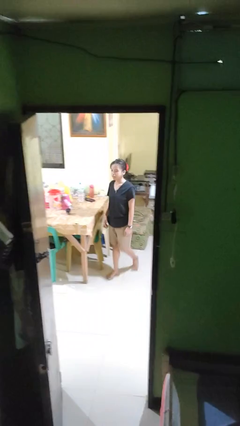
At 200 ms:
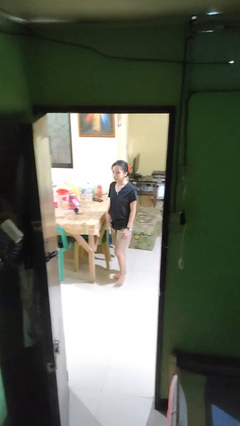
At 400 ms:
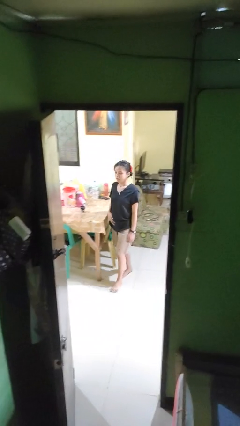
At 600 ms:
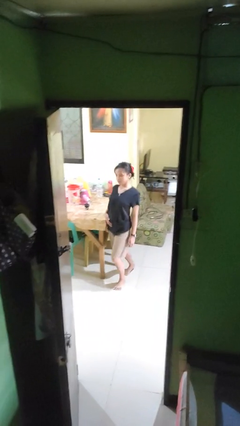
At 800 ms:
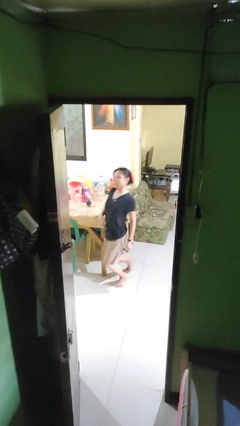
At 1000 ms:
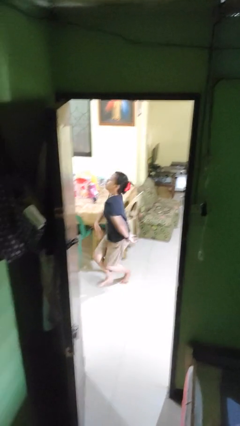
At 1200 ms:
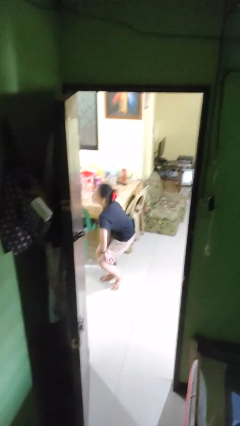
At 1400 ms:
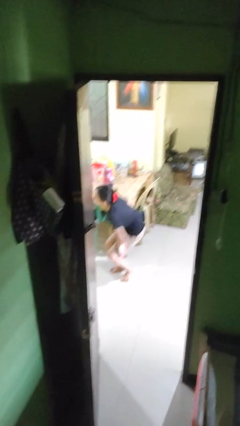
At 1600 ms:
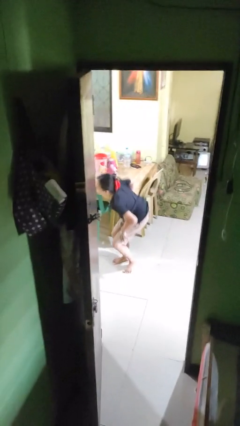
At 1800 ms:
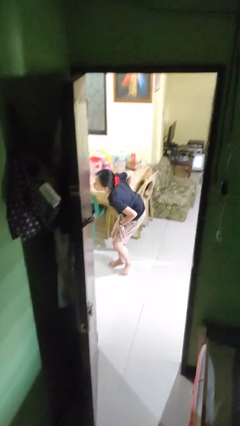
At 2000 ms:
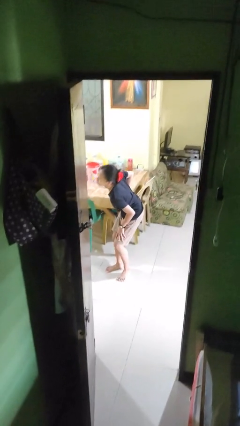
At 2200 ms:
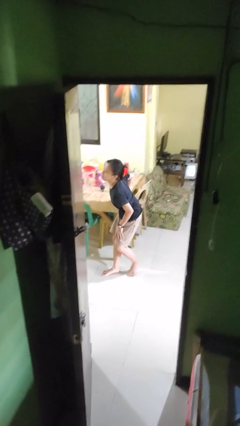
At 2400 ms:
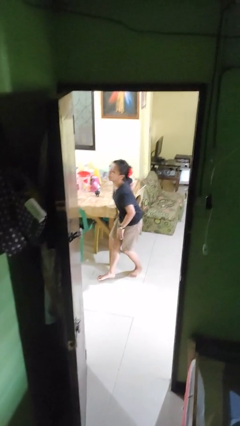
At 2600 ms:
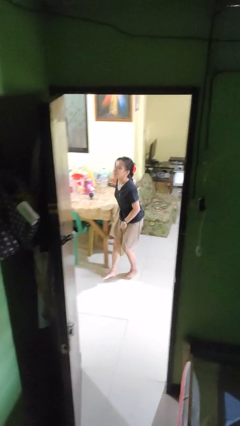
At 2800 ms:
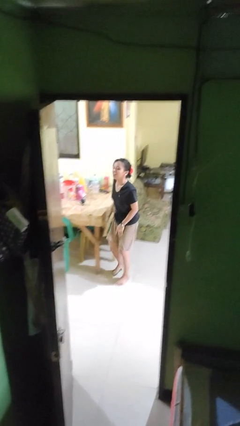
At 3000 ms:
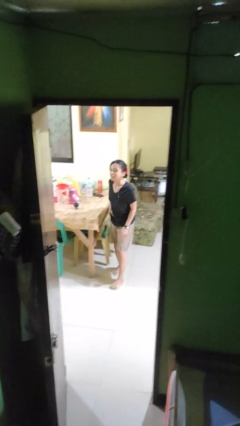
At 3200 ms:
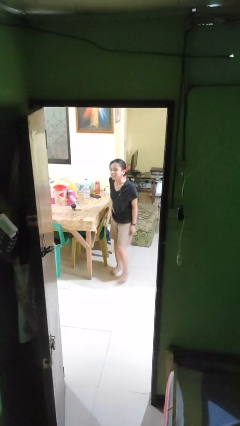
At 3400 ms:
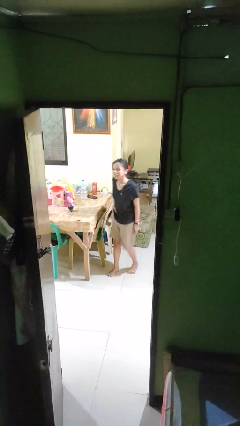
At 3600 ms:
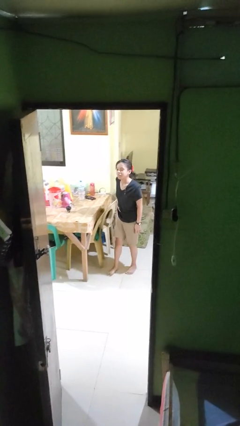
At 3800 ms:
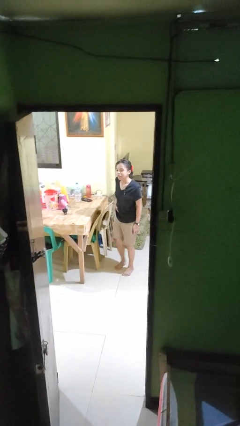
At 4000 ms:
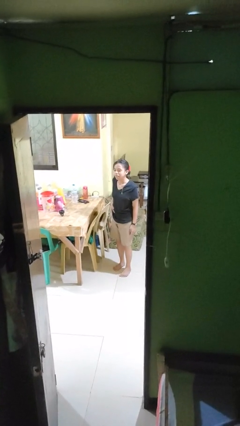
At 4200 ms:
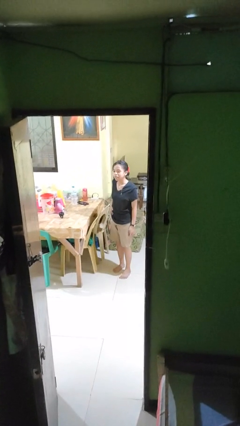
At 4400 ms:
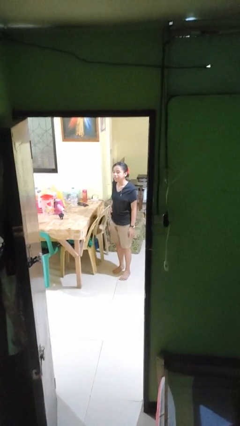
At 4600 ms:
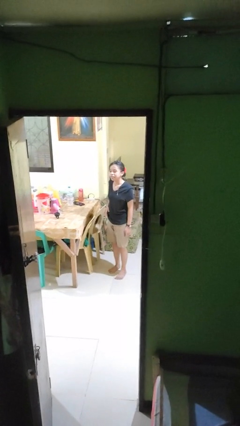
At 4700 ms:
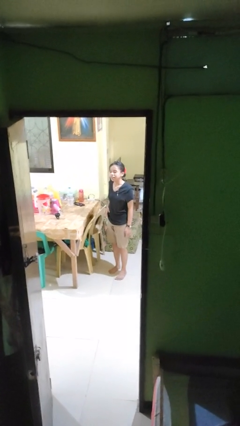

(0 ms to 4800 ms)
person bumps into table

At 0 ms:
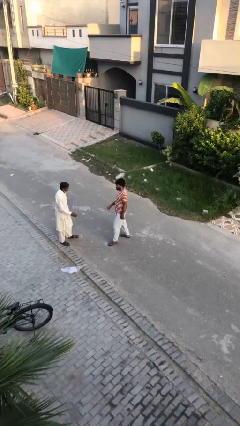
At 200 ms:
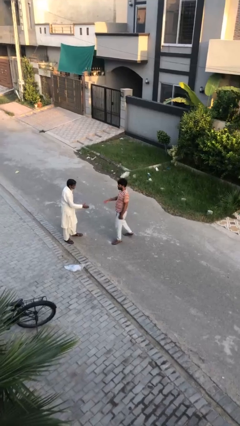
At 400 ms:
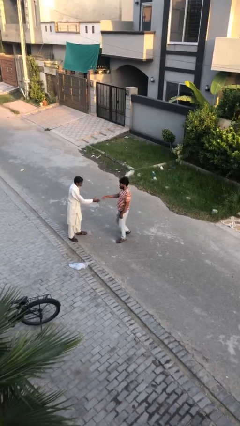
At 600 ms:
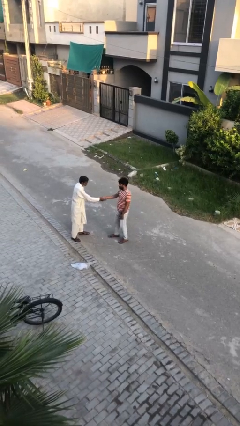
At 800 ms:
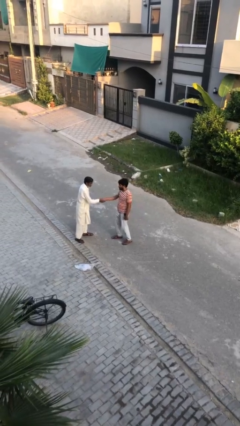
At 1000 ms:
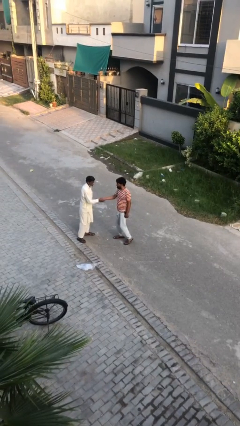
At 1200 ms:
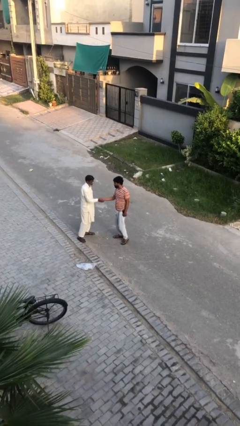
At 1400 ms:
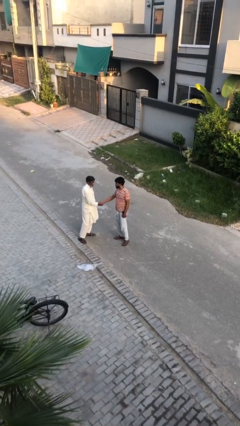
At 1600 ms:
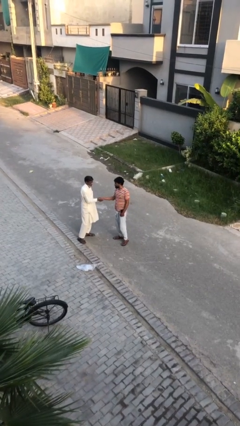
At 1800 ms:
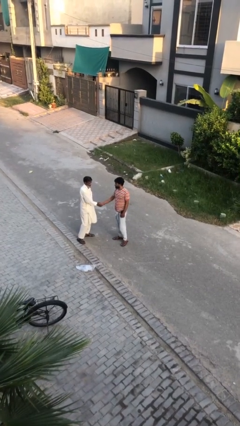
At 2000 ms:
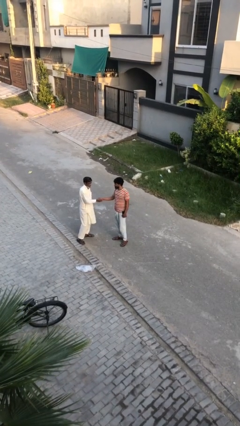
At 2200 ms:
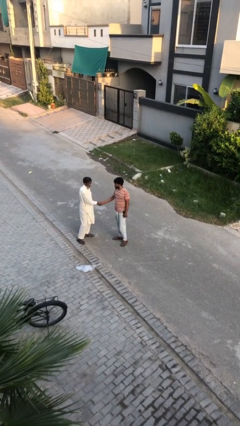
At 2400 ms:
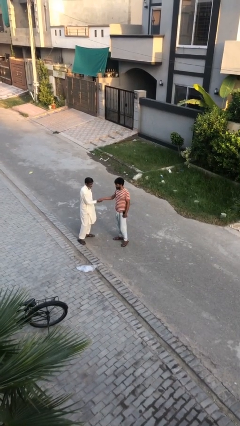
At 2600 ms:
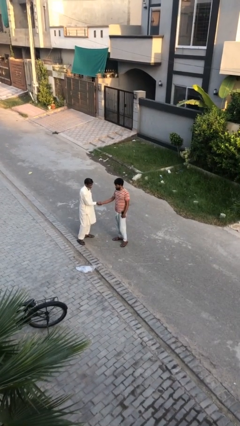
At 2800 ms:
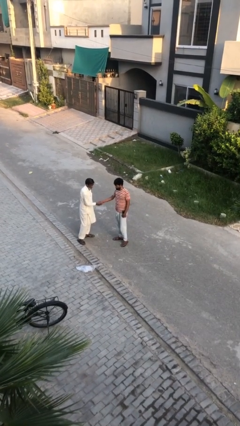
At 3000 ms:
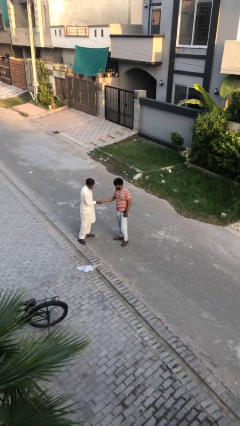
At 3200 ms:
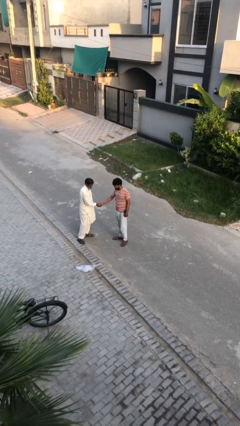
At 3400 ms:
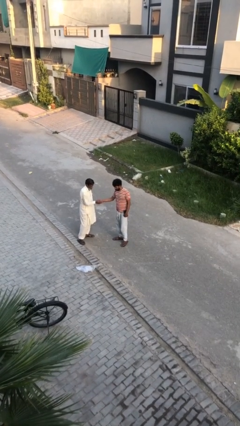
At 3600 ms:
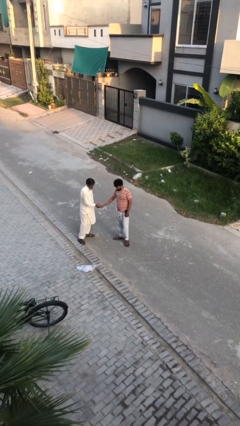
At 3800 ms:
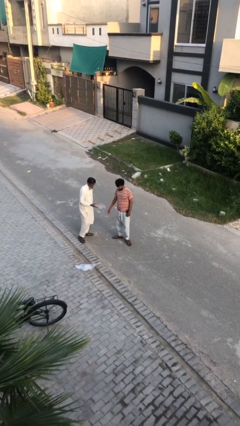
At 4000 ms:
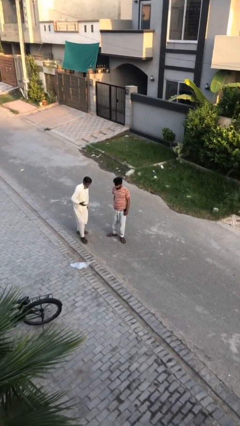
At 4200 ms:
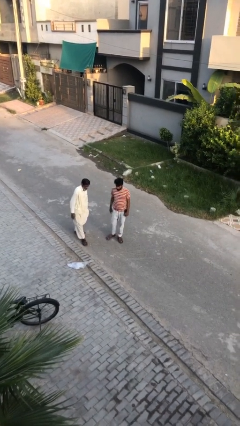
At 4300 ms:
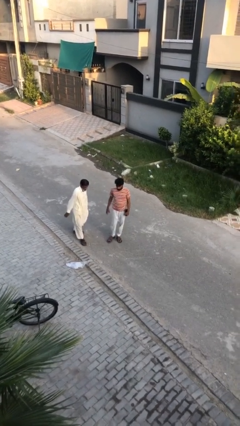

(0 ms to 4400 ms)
person shakes hand

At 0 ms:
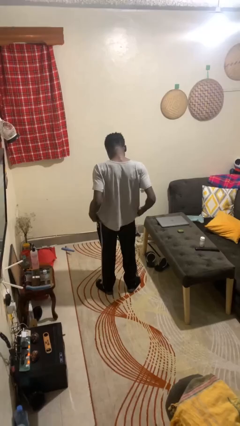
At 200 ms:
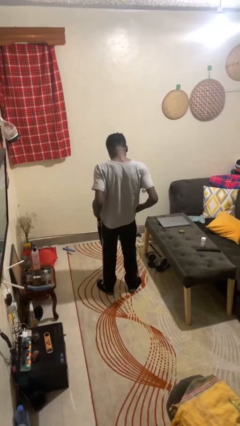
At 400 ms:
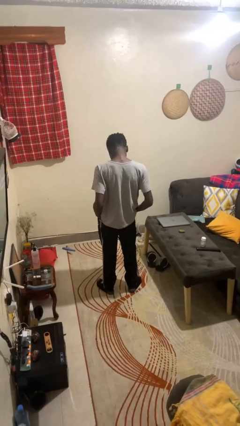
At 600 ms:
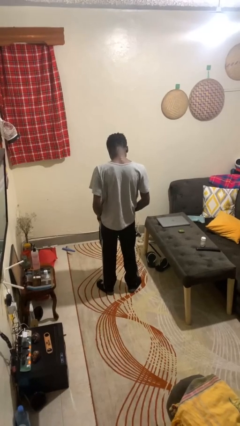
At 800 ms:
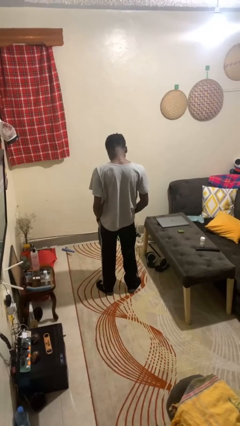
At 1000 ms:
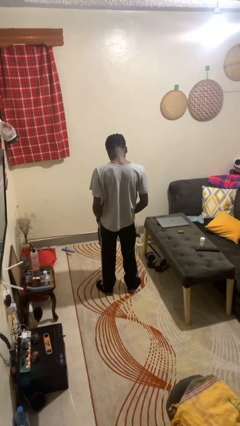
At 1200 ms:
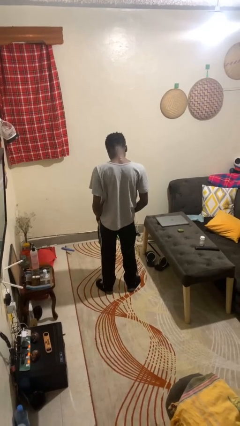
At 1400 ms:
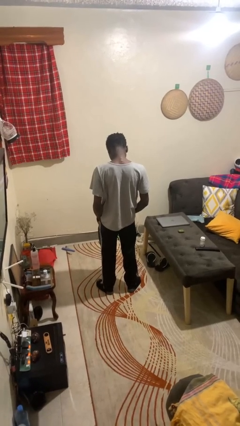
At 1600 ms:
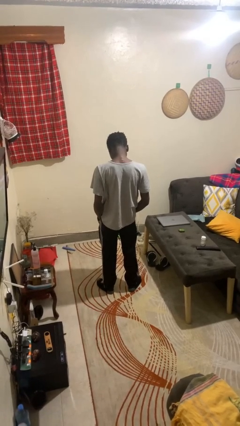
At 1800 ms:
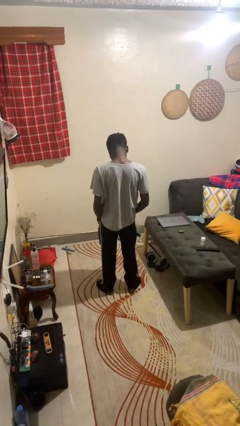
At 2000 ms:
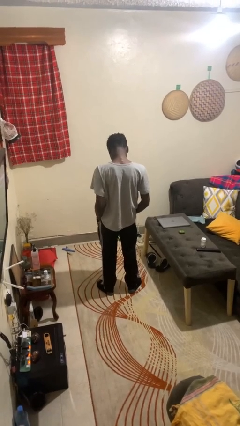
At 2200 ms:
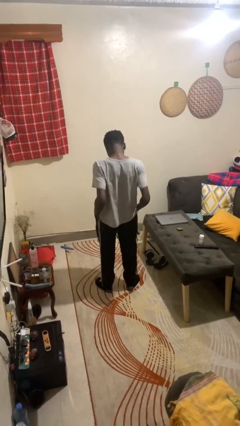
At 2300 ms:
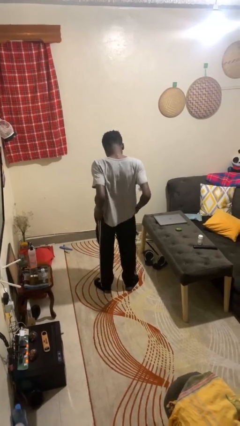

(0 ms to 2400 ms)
person puts hands in back pockets

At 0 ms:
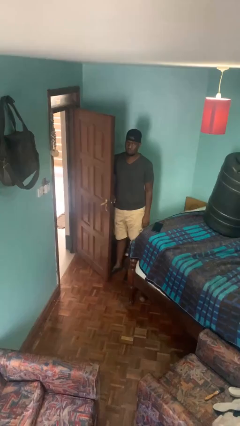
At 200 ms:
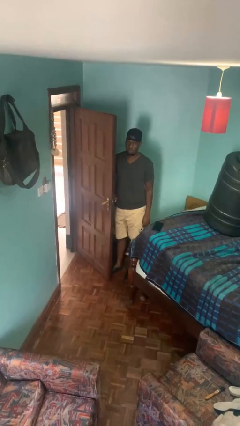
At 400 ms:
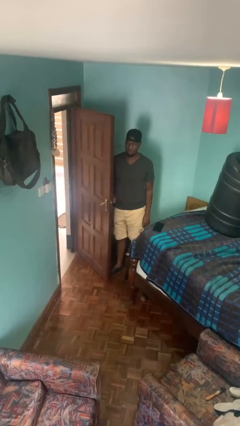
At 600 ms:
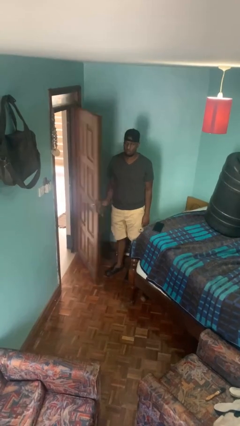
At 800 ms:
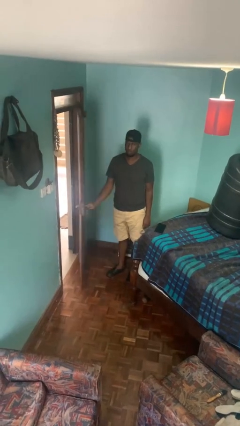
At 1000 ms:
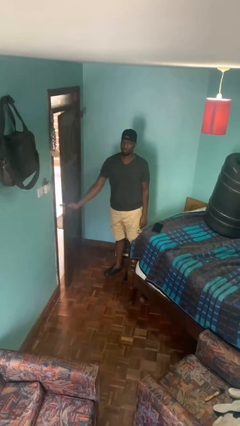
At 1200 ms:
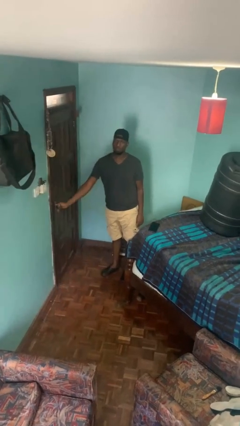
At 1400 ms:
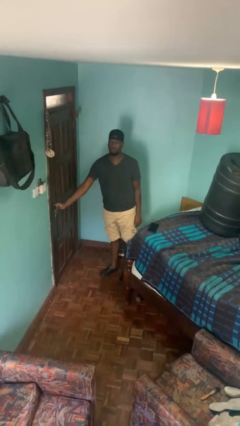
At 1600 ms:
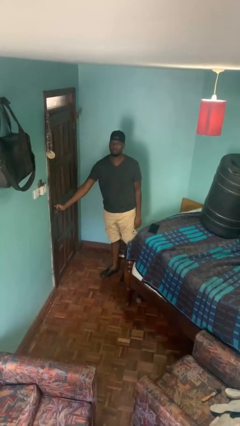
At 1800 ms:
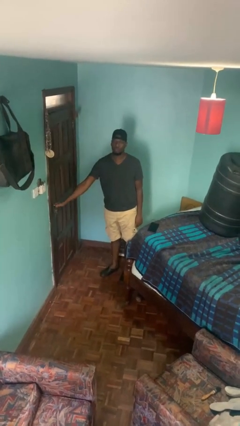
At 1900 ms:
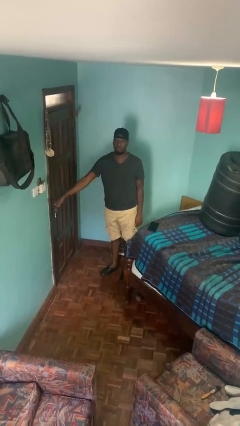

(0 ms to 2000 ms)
person closes facility door

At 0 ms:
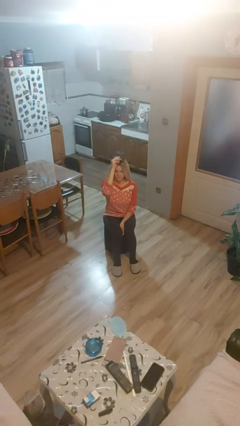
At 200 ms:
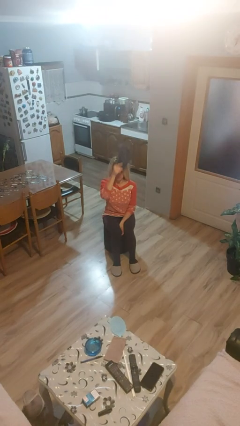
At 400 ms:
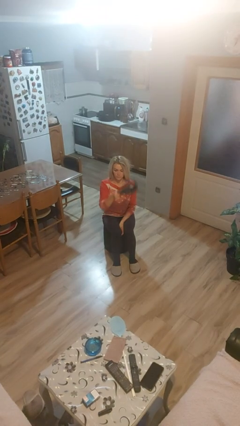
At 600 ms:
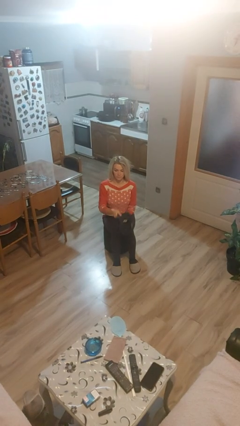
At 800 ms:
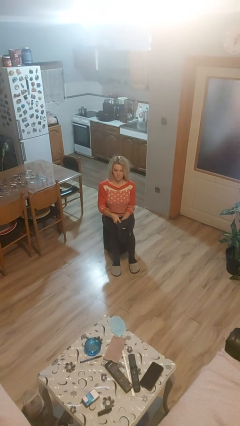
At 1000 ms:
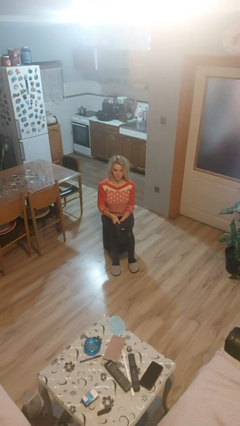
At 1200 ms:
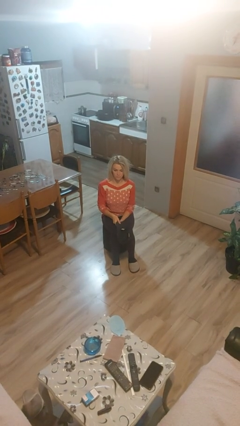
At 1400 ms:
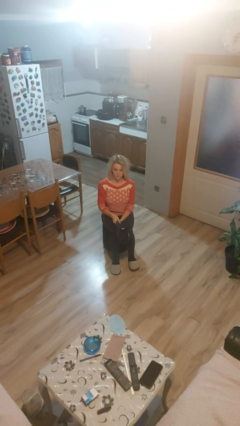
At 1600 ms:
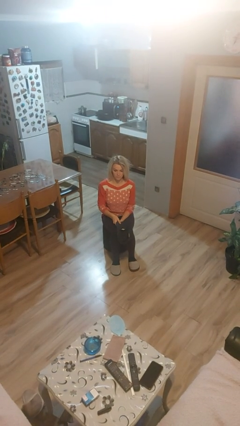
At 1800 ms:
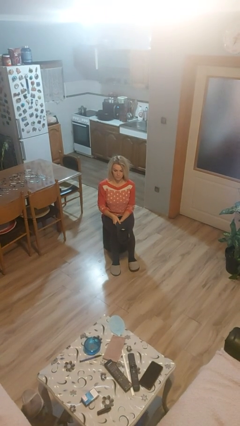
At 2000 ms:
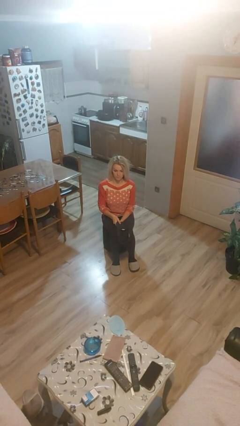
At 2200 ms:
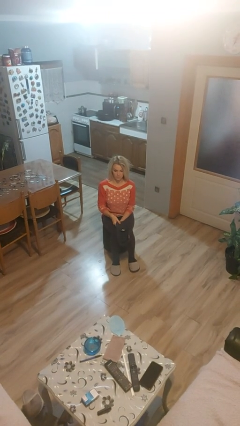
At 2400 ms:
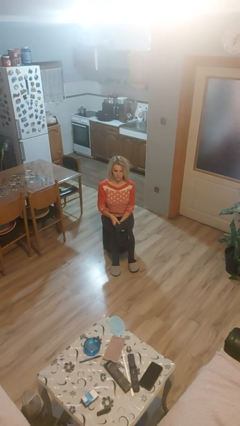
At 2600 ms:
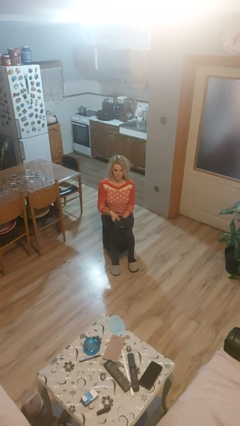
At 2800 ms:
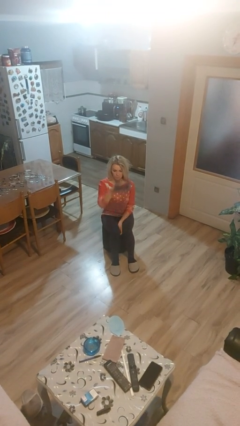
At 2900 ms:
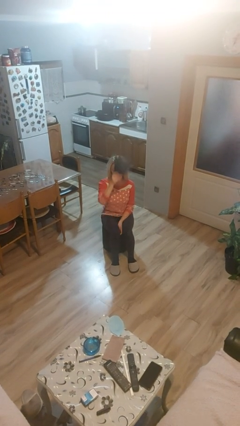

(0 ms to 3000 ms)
person takes off hat

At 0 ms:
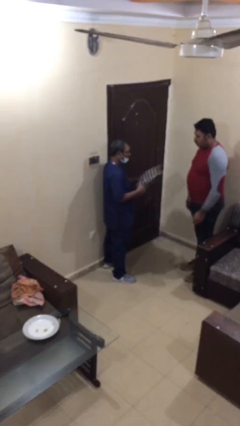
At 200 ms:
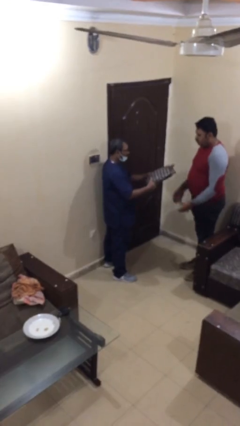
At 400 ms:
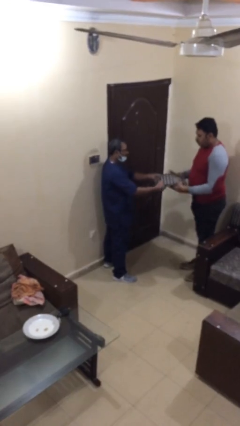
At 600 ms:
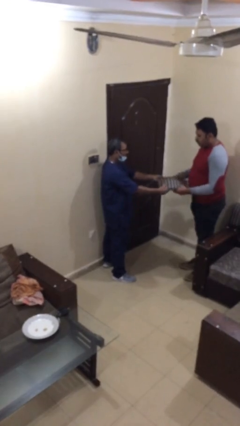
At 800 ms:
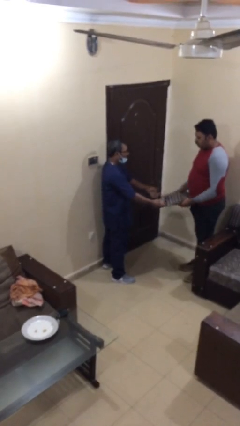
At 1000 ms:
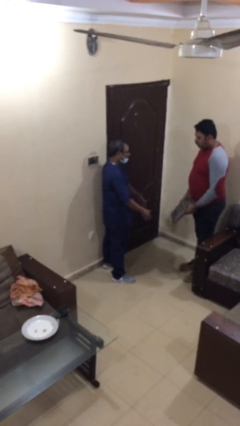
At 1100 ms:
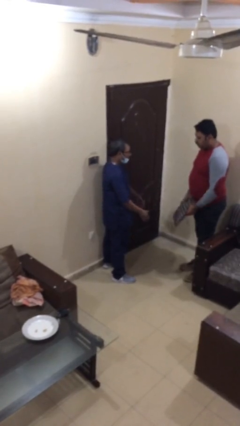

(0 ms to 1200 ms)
person transfers object to person
